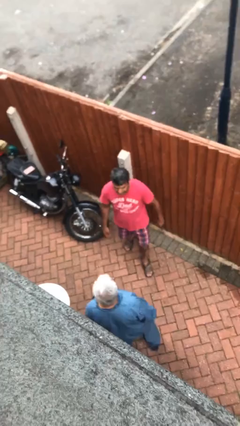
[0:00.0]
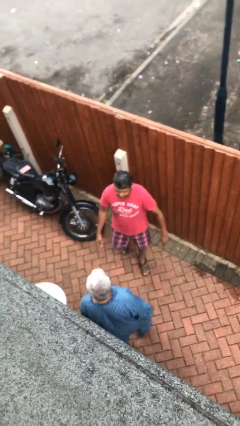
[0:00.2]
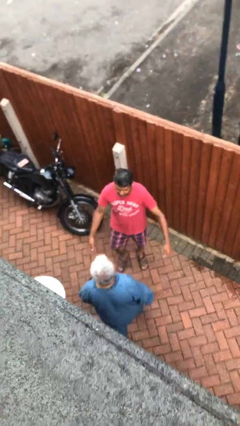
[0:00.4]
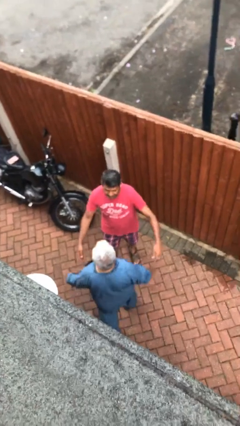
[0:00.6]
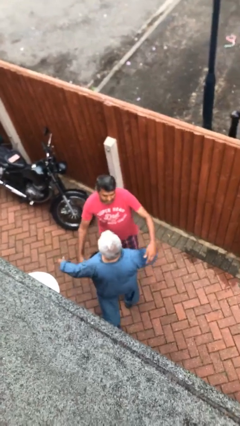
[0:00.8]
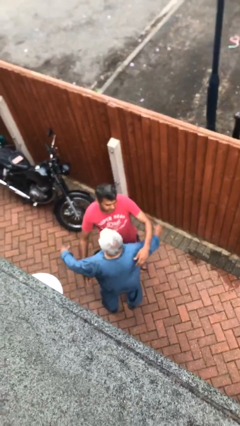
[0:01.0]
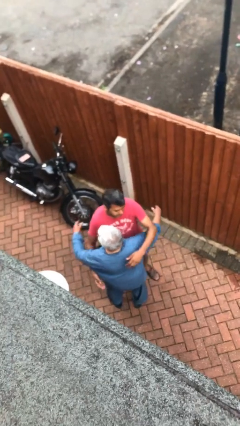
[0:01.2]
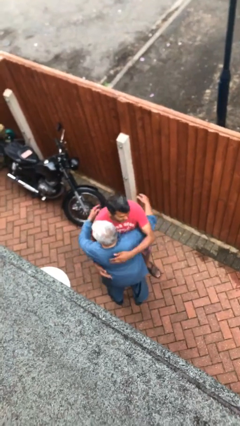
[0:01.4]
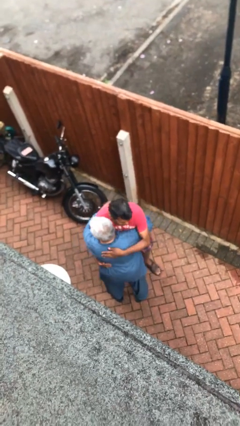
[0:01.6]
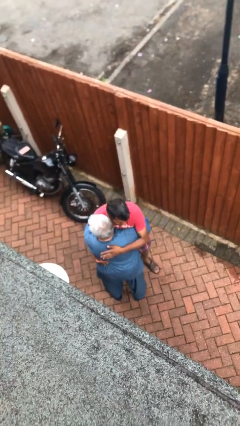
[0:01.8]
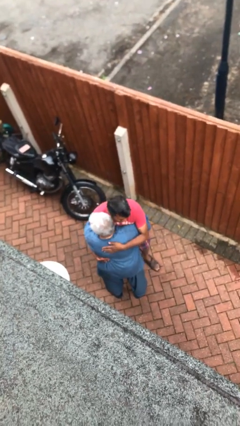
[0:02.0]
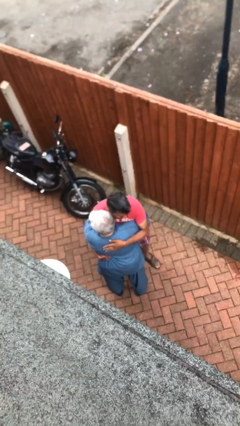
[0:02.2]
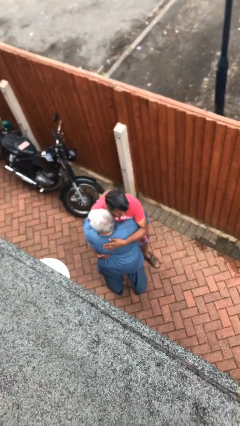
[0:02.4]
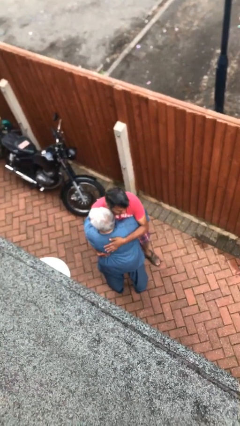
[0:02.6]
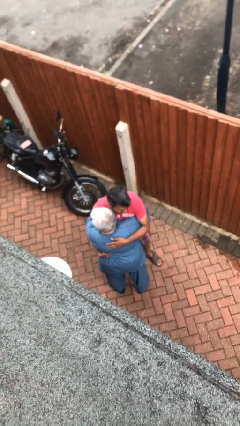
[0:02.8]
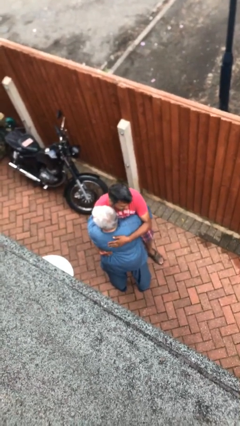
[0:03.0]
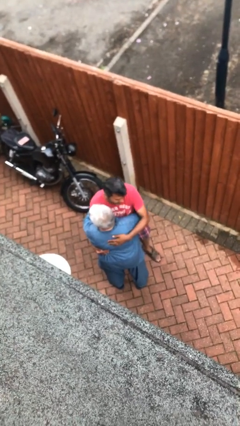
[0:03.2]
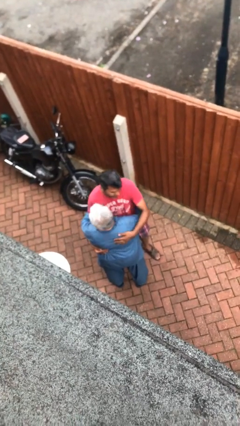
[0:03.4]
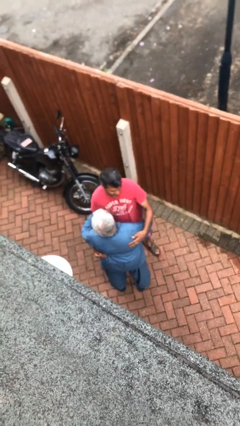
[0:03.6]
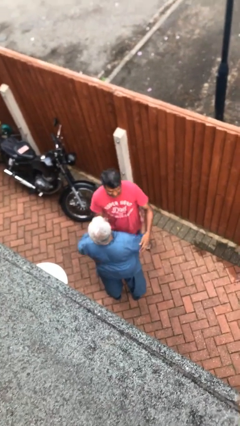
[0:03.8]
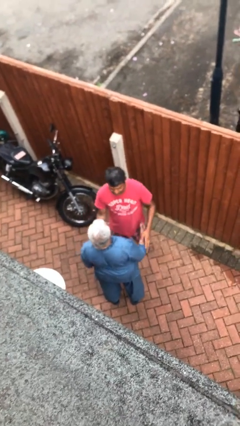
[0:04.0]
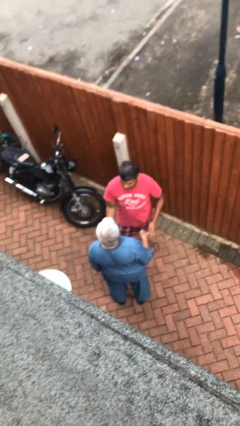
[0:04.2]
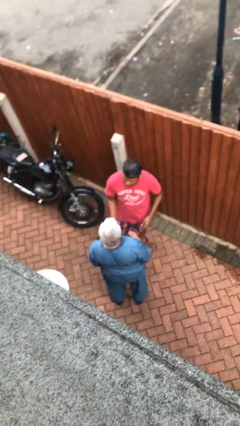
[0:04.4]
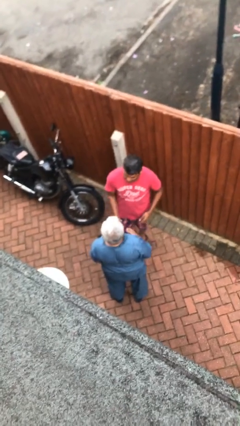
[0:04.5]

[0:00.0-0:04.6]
person embraces person

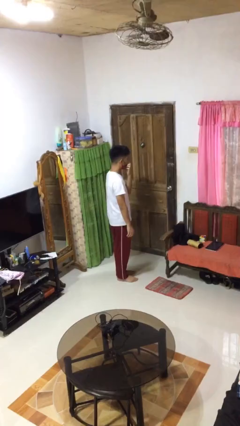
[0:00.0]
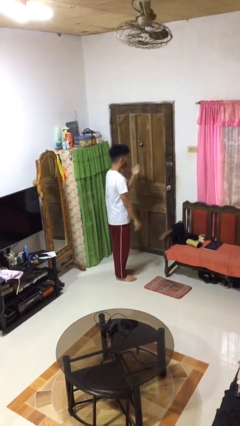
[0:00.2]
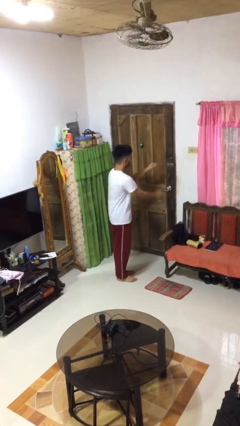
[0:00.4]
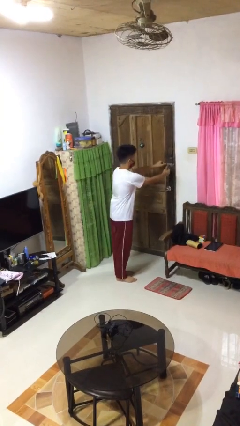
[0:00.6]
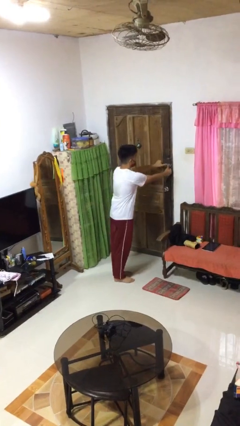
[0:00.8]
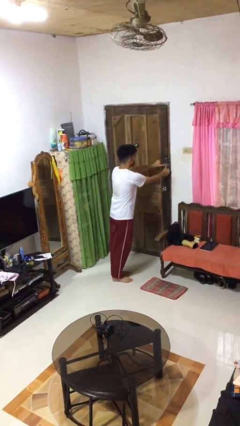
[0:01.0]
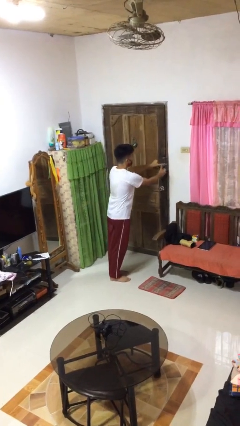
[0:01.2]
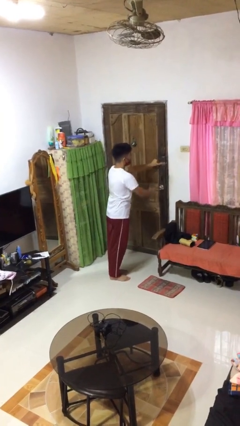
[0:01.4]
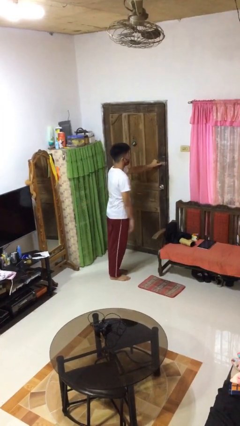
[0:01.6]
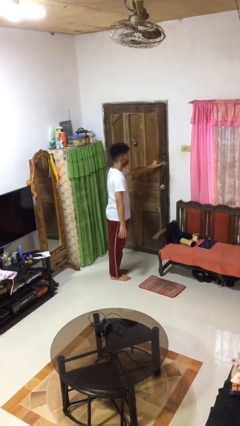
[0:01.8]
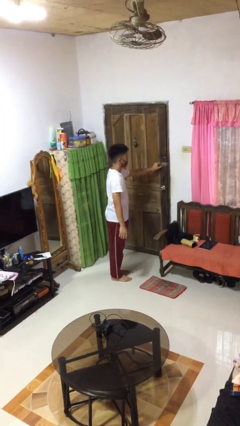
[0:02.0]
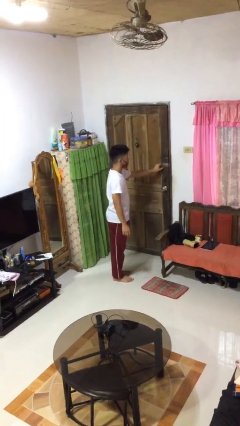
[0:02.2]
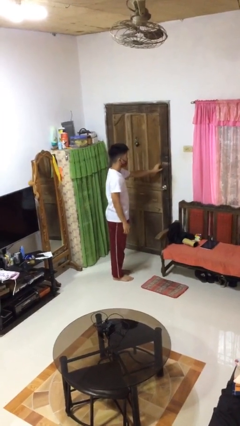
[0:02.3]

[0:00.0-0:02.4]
person unlocks door with keys

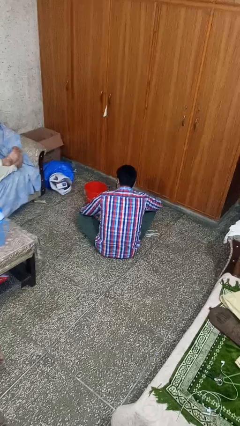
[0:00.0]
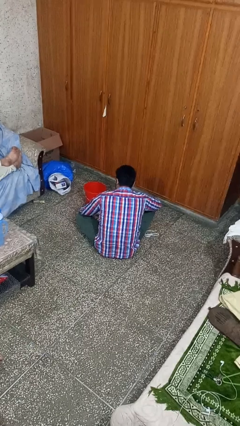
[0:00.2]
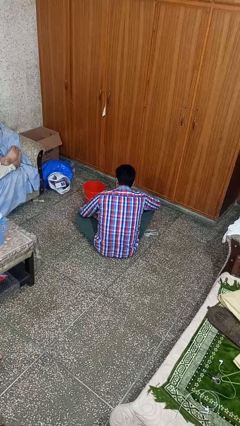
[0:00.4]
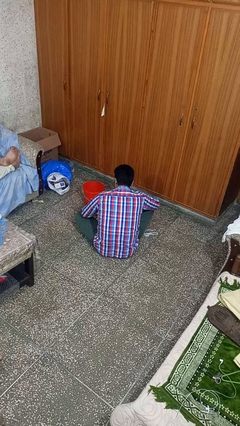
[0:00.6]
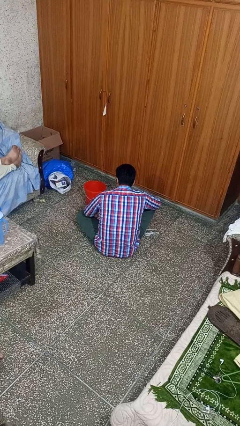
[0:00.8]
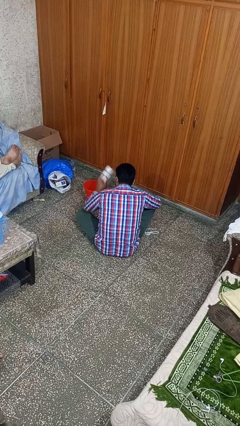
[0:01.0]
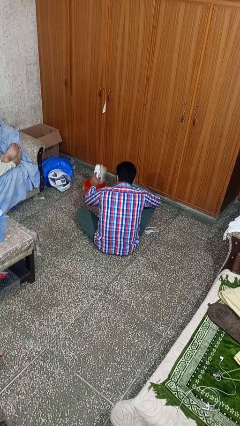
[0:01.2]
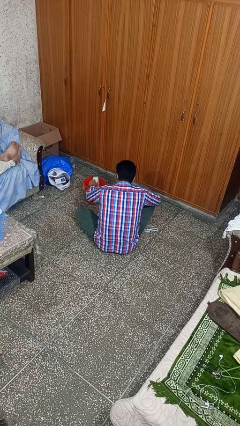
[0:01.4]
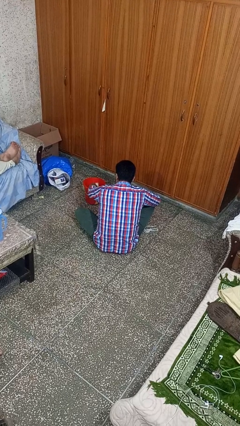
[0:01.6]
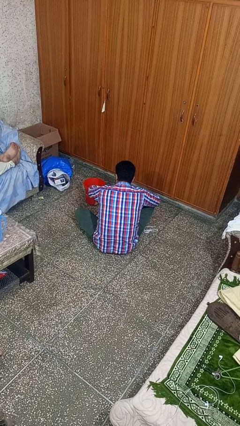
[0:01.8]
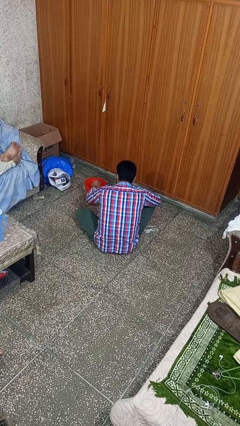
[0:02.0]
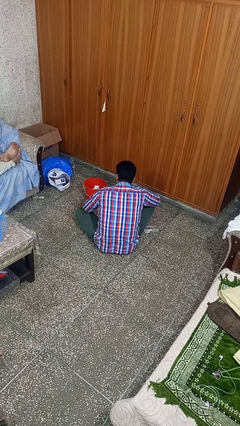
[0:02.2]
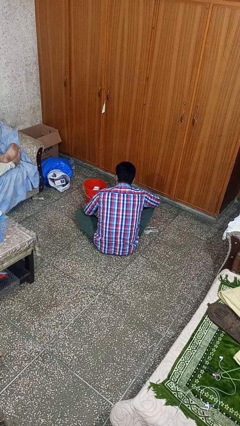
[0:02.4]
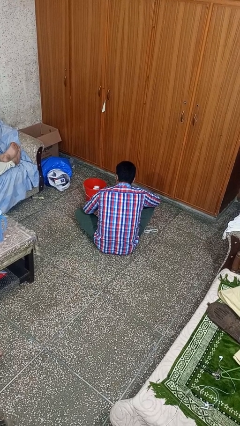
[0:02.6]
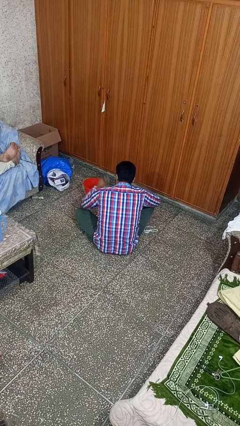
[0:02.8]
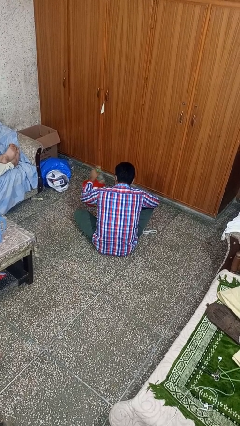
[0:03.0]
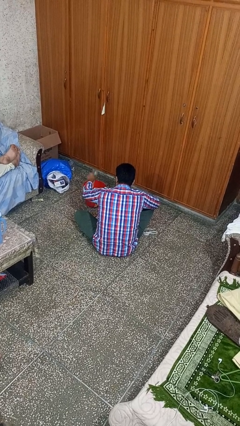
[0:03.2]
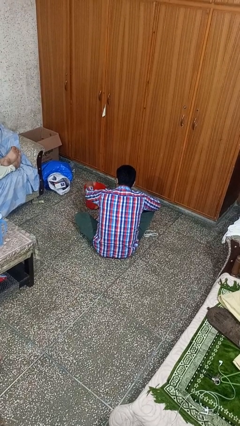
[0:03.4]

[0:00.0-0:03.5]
person puts object into basket

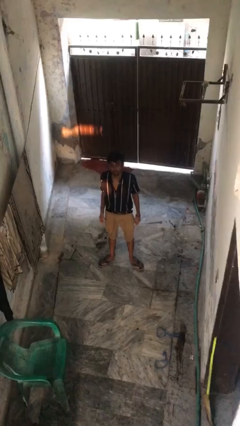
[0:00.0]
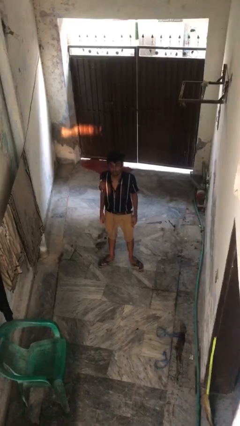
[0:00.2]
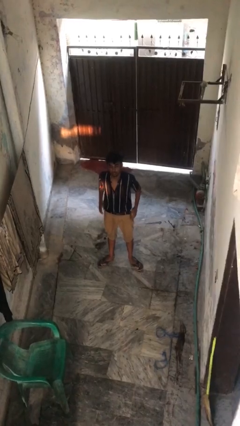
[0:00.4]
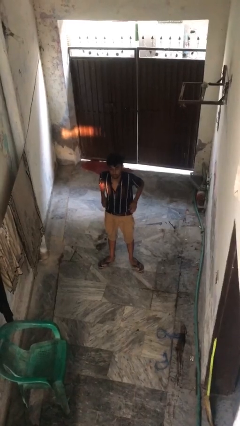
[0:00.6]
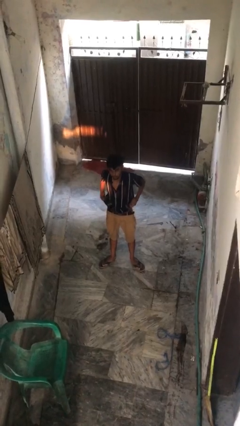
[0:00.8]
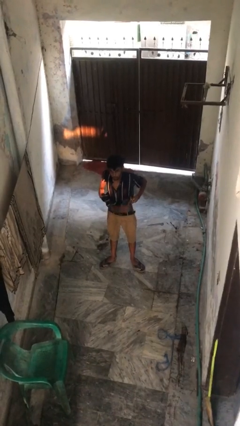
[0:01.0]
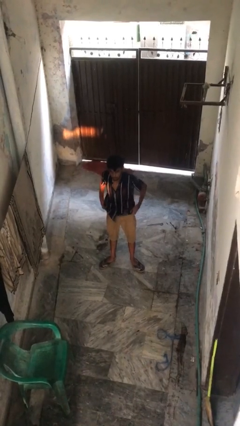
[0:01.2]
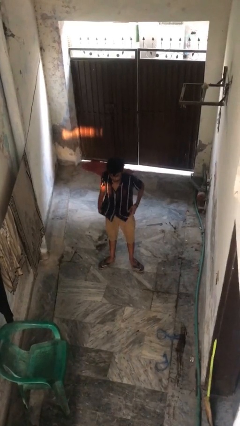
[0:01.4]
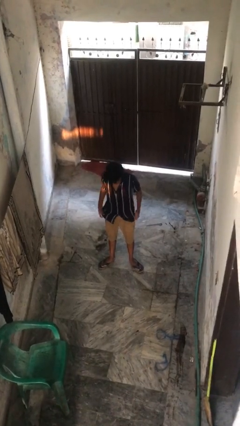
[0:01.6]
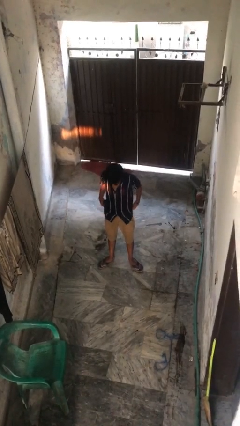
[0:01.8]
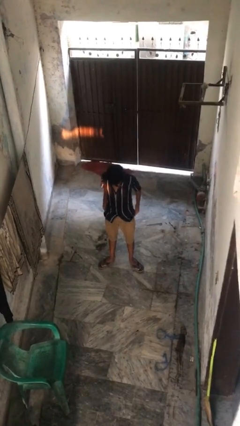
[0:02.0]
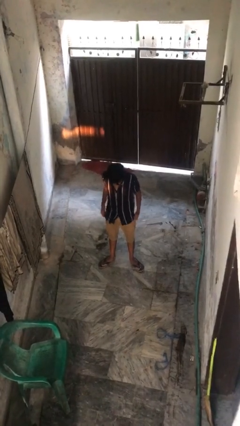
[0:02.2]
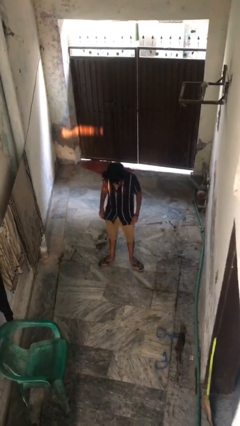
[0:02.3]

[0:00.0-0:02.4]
person untucks shirt

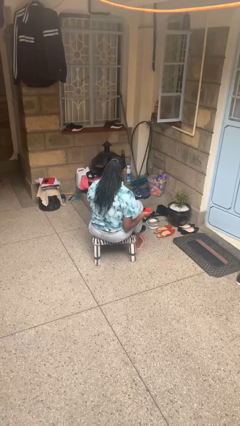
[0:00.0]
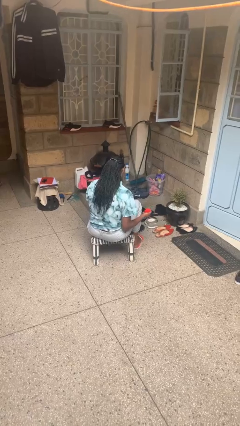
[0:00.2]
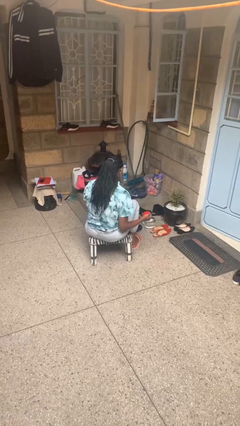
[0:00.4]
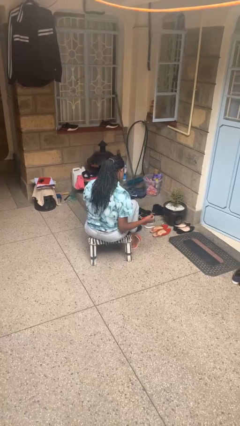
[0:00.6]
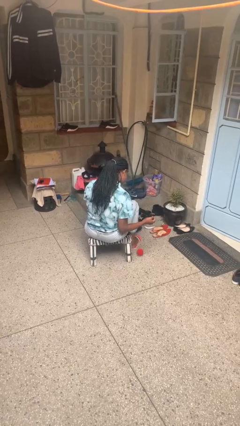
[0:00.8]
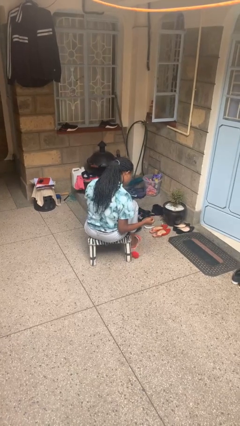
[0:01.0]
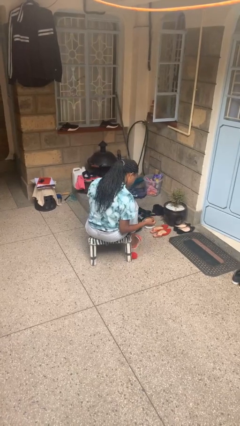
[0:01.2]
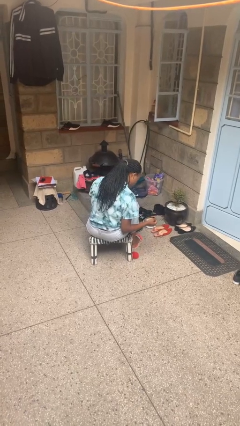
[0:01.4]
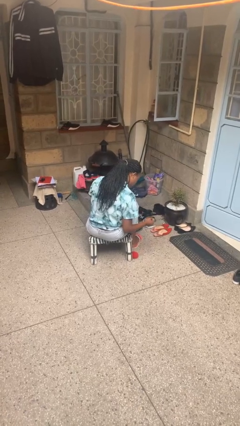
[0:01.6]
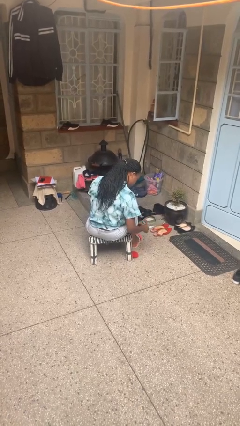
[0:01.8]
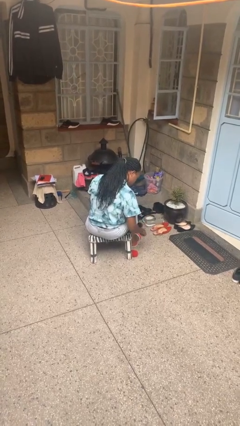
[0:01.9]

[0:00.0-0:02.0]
person drops object

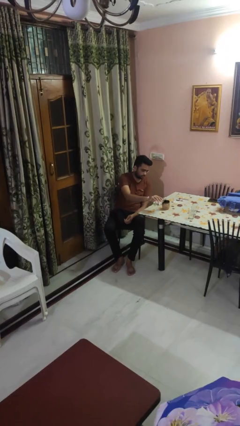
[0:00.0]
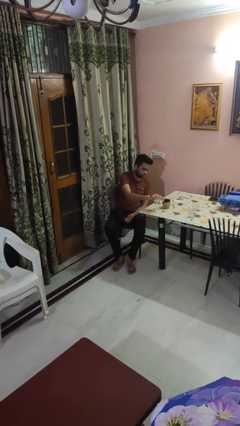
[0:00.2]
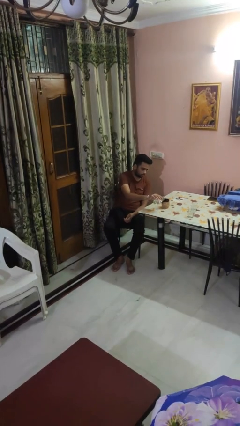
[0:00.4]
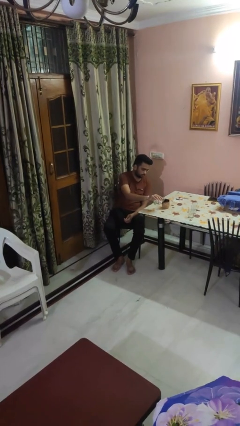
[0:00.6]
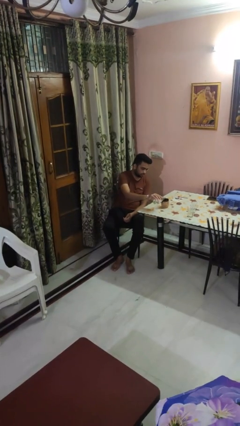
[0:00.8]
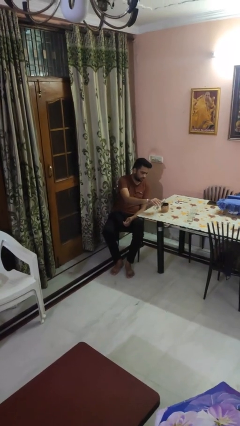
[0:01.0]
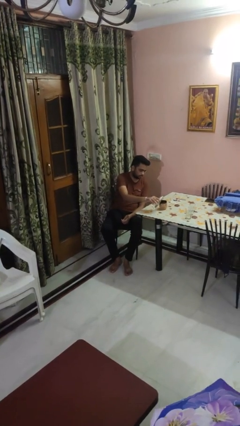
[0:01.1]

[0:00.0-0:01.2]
person pours liquid into cup

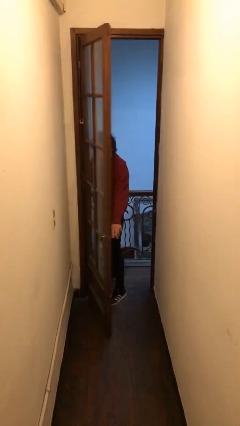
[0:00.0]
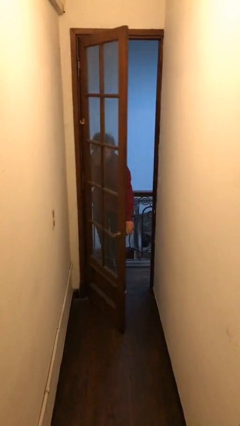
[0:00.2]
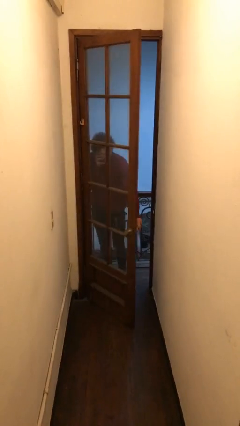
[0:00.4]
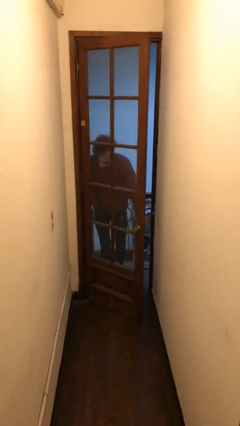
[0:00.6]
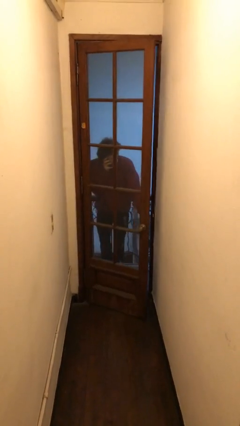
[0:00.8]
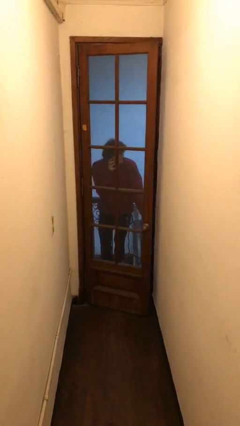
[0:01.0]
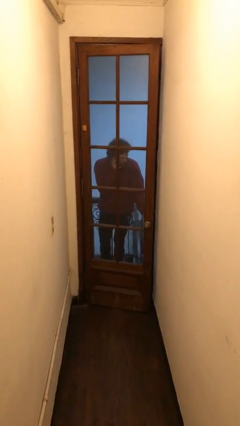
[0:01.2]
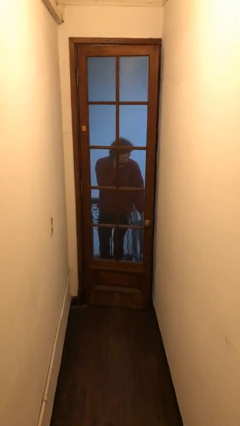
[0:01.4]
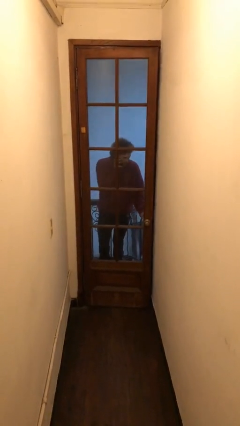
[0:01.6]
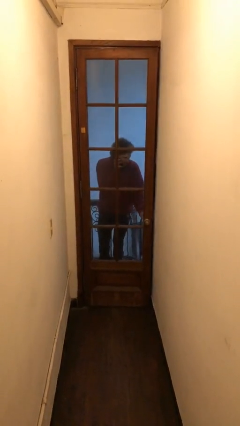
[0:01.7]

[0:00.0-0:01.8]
person closes facility door
